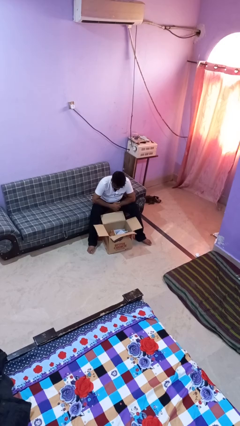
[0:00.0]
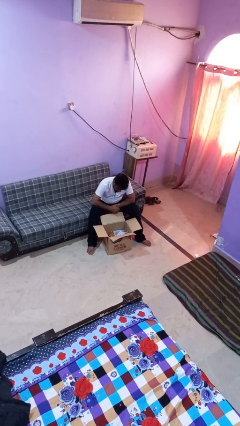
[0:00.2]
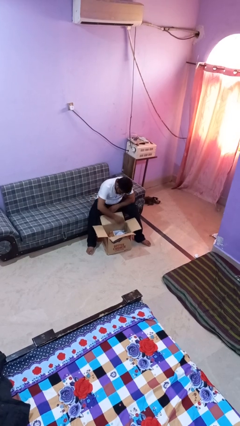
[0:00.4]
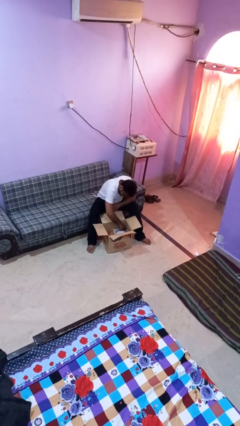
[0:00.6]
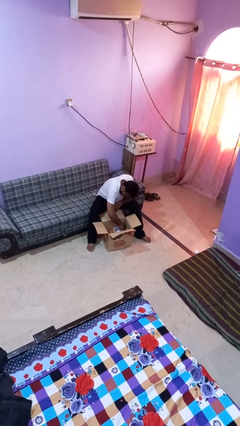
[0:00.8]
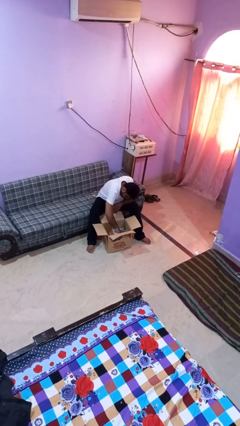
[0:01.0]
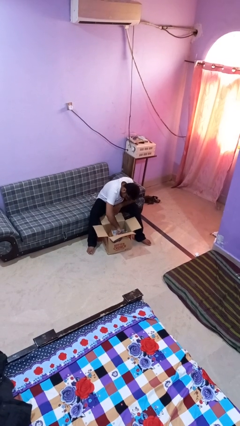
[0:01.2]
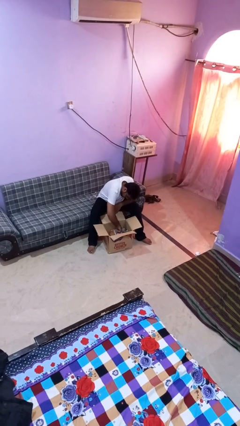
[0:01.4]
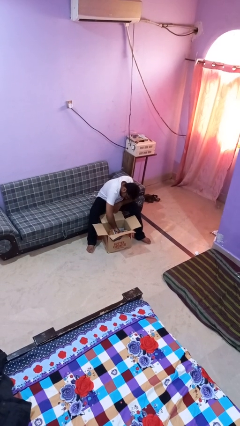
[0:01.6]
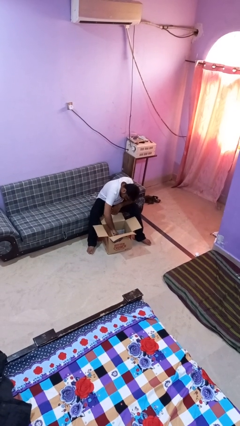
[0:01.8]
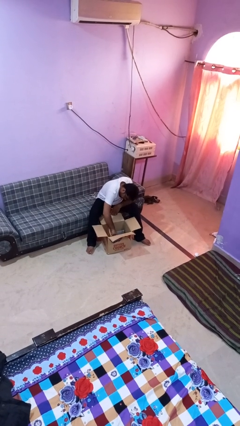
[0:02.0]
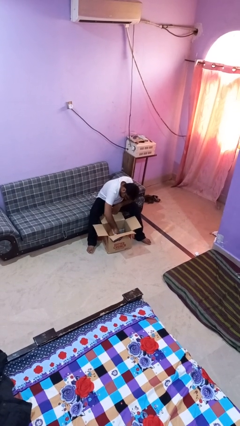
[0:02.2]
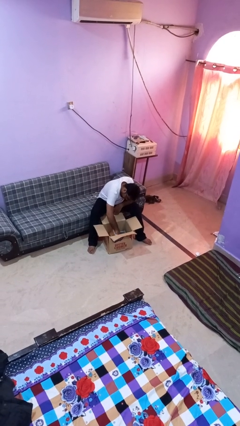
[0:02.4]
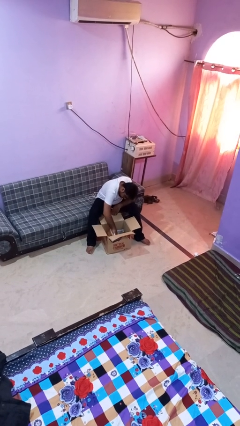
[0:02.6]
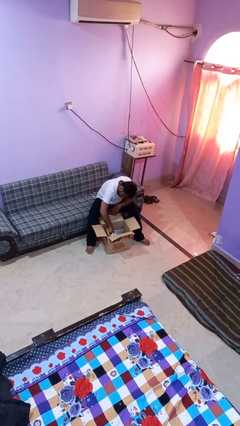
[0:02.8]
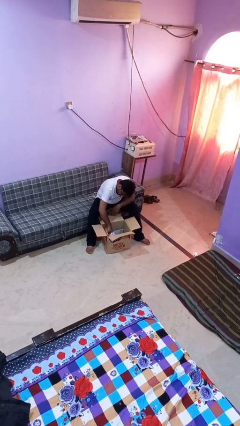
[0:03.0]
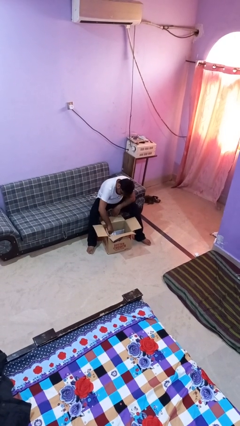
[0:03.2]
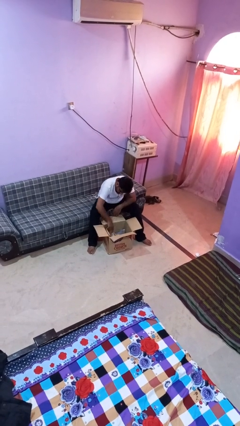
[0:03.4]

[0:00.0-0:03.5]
person searches in box

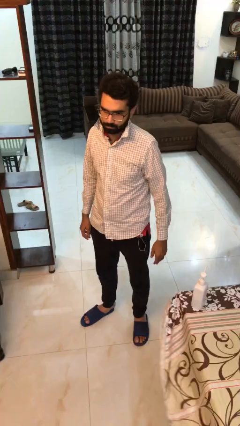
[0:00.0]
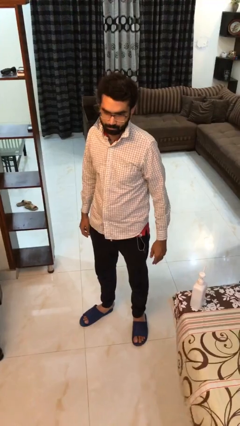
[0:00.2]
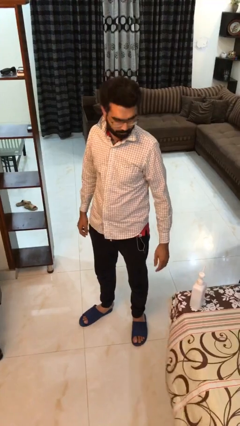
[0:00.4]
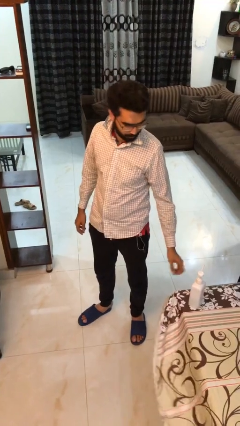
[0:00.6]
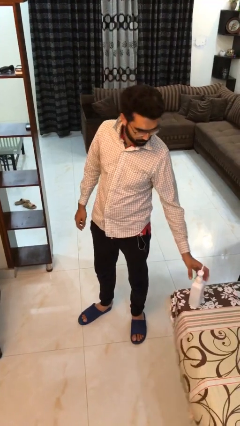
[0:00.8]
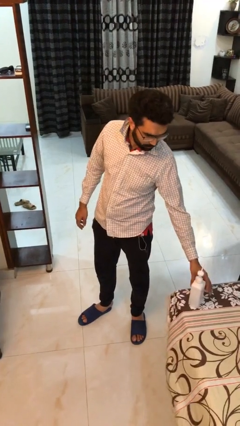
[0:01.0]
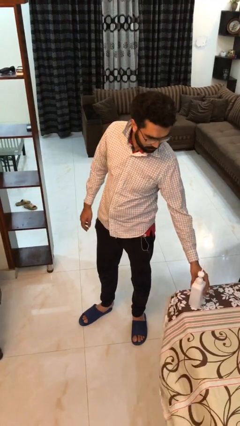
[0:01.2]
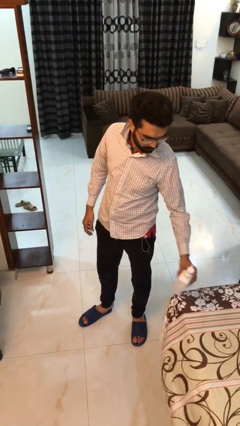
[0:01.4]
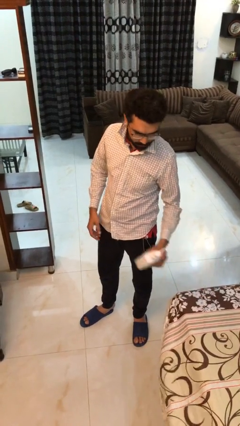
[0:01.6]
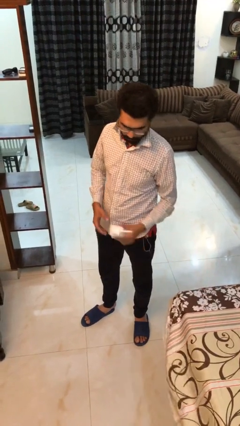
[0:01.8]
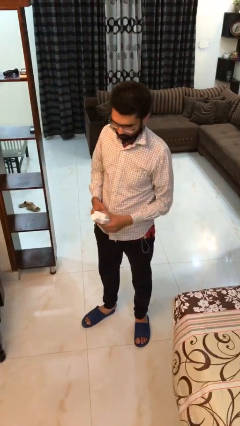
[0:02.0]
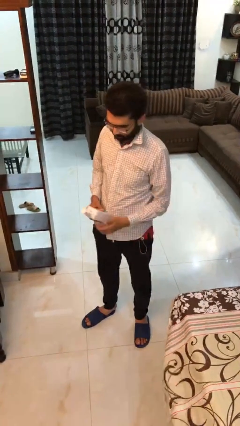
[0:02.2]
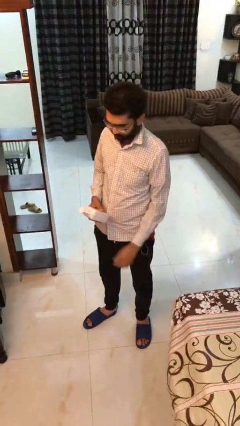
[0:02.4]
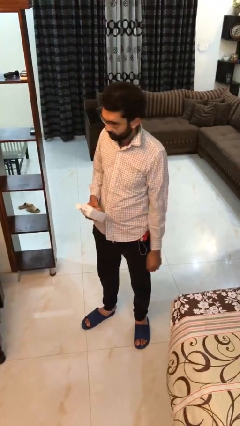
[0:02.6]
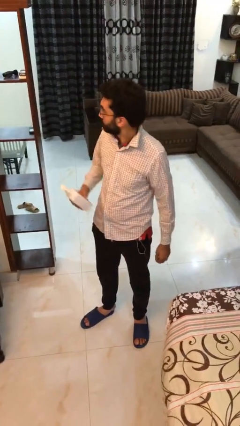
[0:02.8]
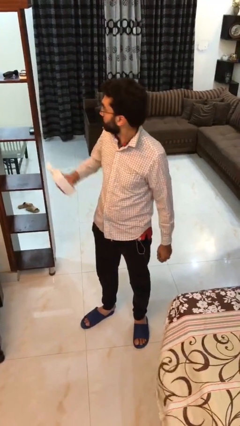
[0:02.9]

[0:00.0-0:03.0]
person picks up object from table

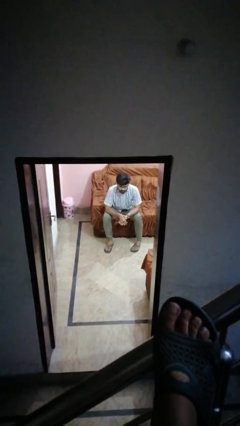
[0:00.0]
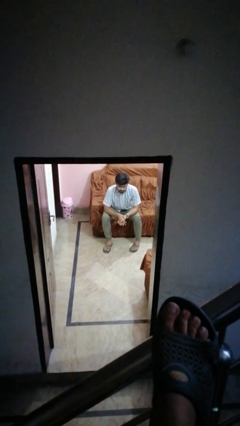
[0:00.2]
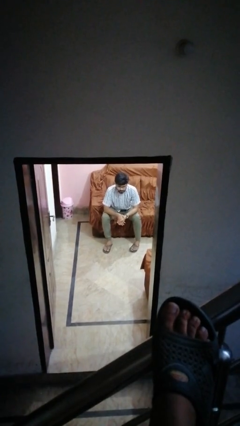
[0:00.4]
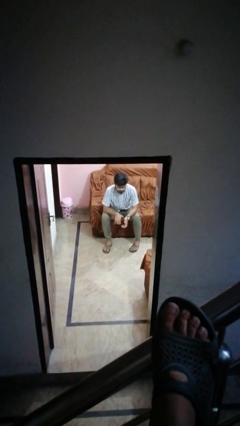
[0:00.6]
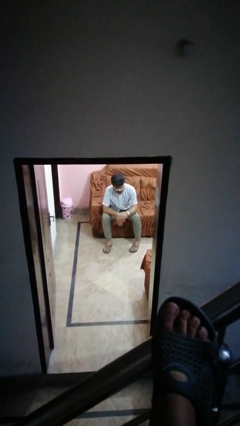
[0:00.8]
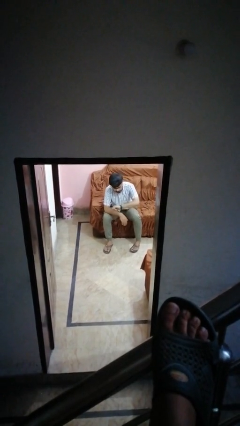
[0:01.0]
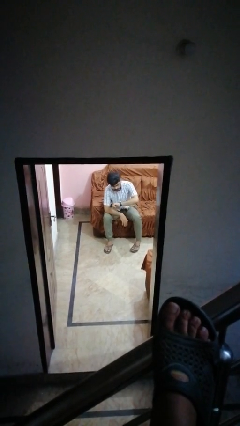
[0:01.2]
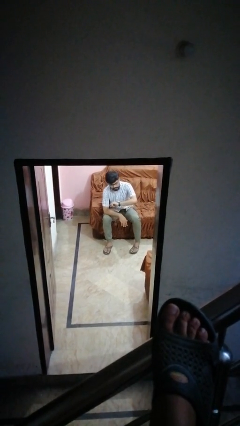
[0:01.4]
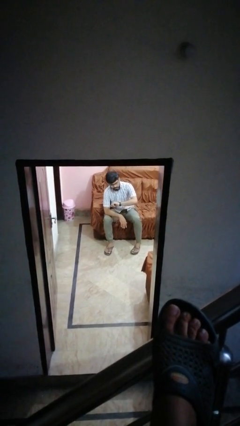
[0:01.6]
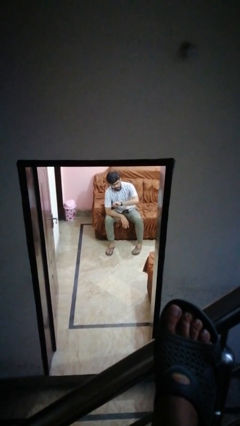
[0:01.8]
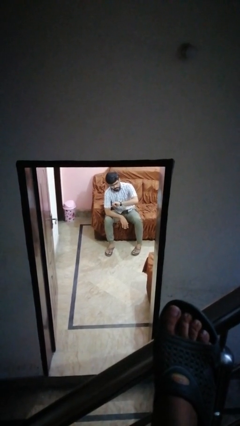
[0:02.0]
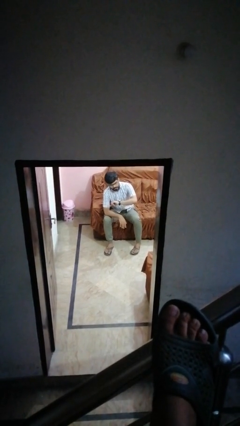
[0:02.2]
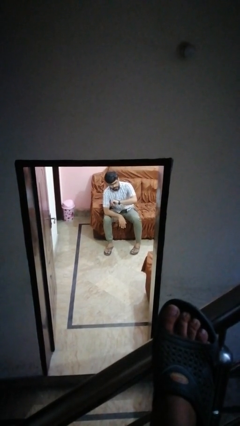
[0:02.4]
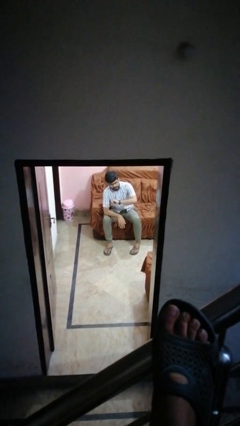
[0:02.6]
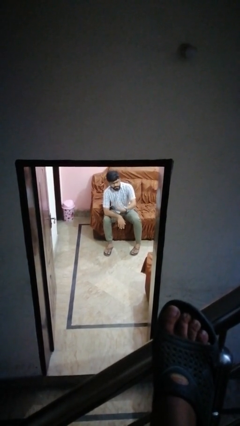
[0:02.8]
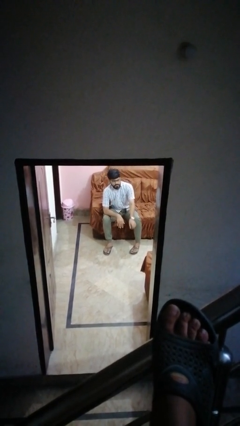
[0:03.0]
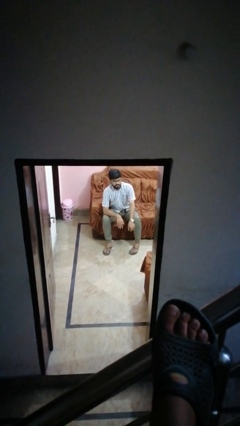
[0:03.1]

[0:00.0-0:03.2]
person looks at wristwatch

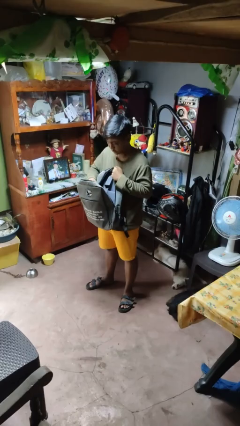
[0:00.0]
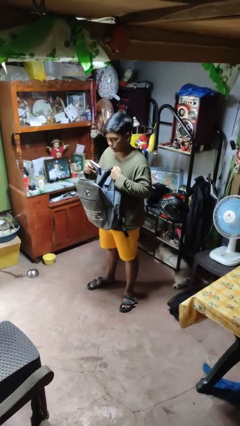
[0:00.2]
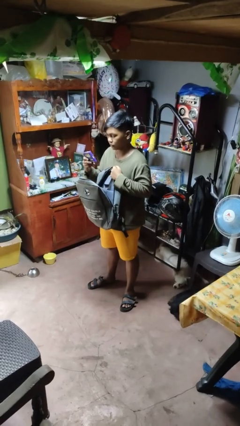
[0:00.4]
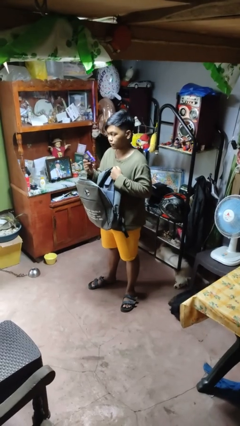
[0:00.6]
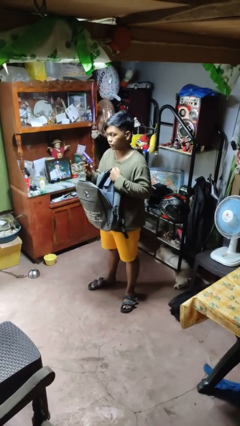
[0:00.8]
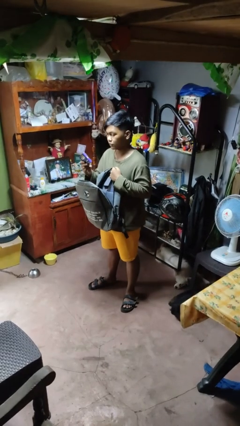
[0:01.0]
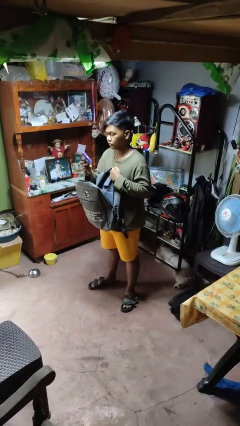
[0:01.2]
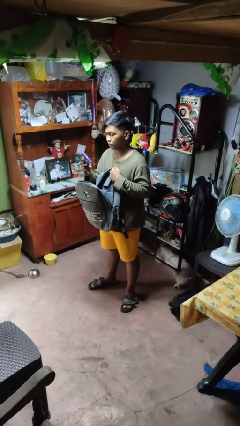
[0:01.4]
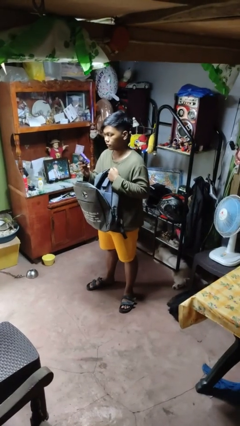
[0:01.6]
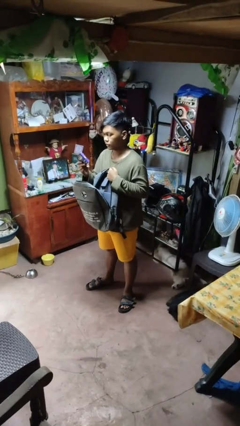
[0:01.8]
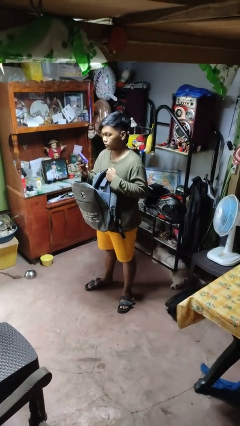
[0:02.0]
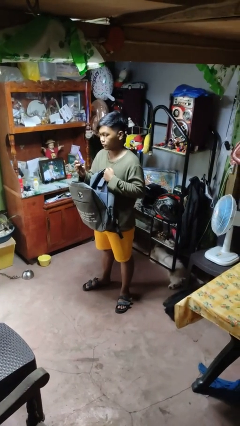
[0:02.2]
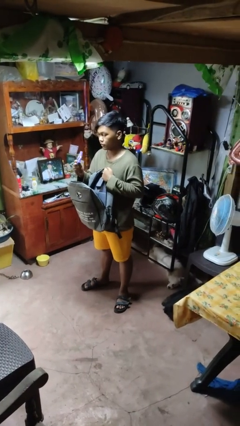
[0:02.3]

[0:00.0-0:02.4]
person takes object from backpack

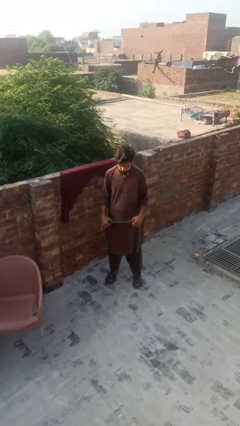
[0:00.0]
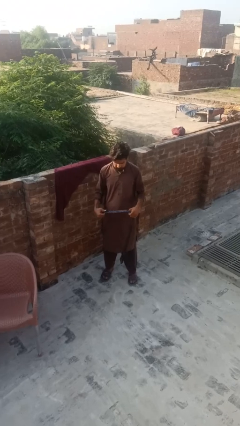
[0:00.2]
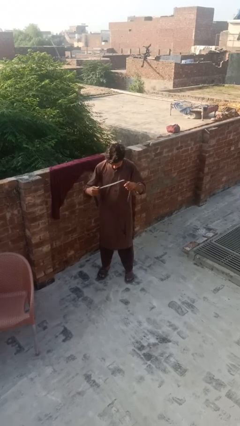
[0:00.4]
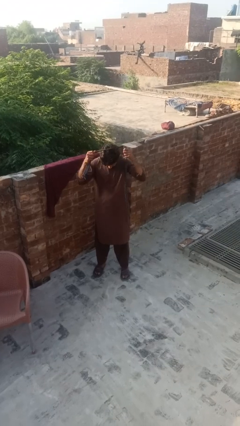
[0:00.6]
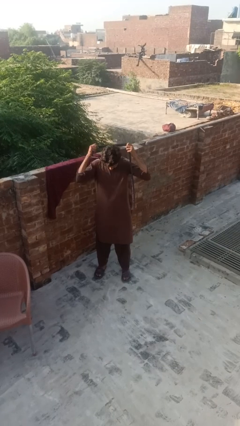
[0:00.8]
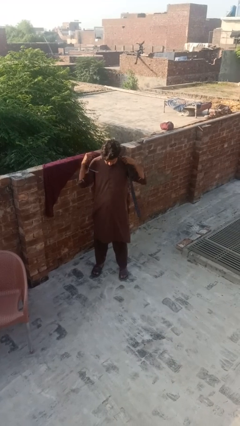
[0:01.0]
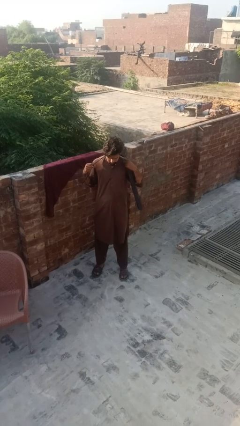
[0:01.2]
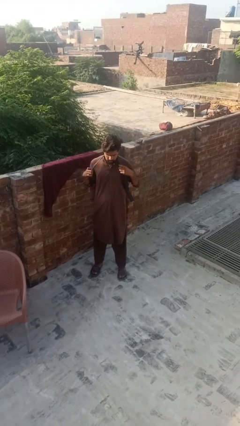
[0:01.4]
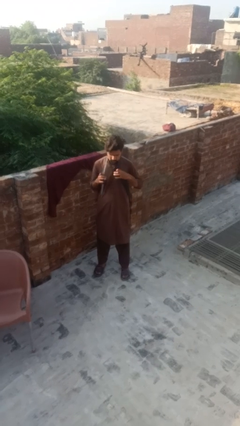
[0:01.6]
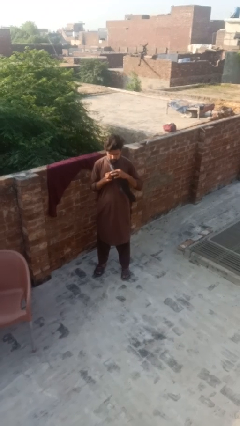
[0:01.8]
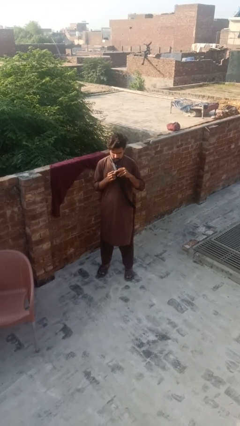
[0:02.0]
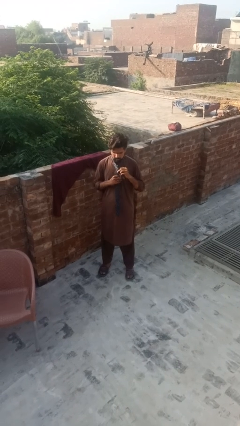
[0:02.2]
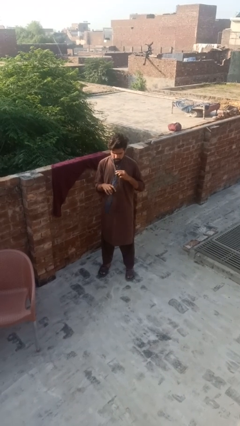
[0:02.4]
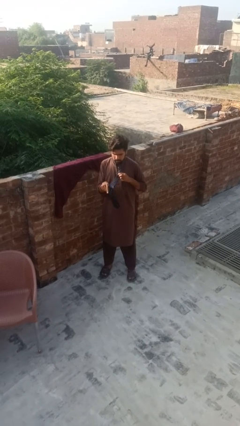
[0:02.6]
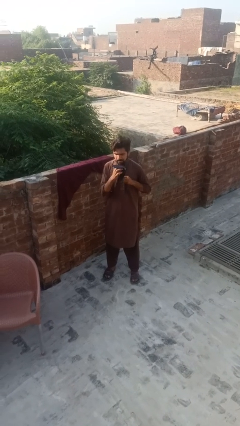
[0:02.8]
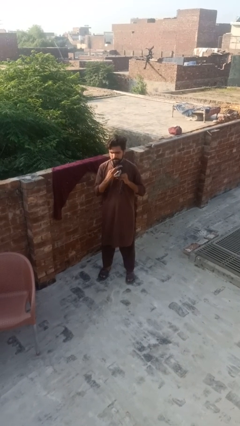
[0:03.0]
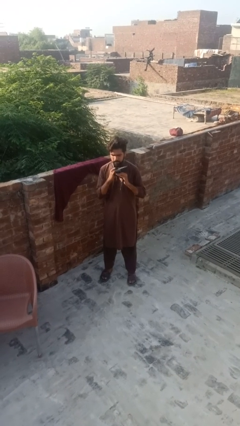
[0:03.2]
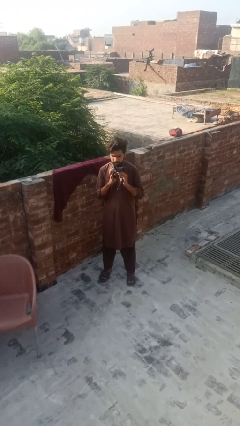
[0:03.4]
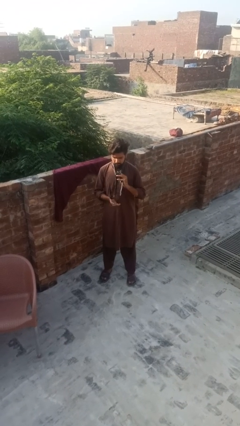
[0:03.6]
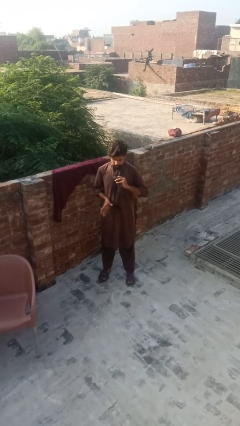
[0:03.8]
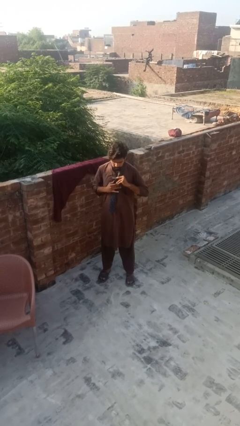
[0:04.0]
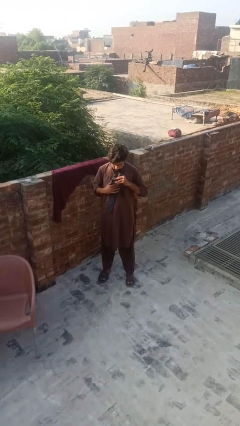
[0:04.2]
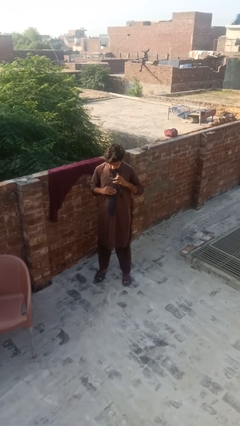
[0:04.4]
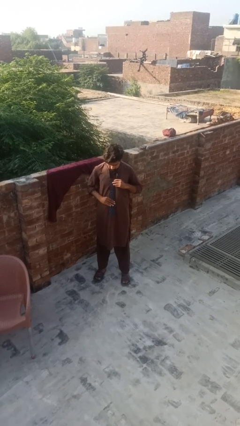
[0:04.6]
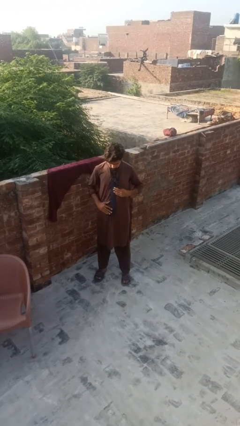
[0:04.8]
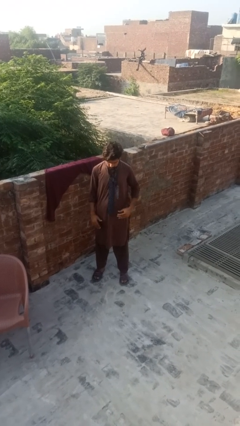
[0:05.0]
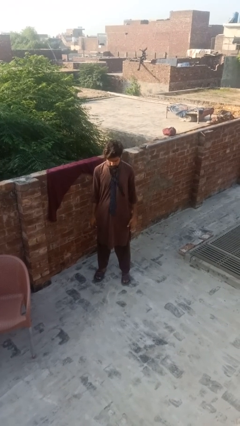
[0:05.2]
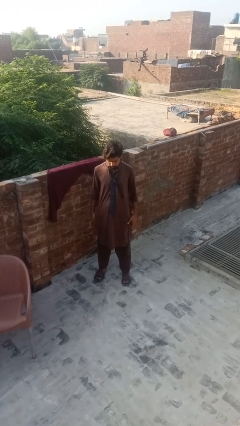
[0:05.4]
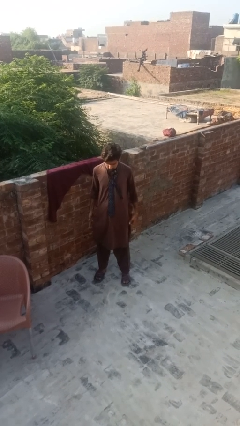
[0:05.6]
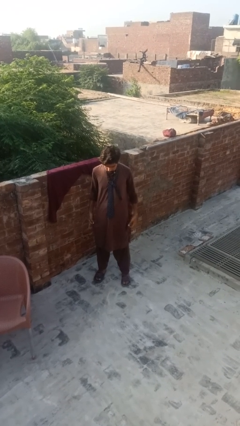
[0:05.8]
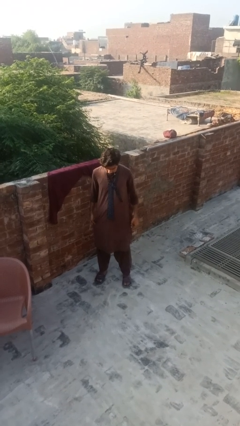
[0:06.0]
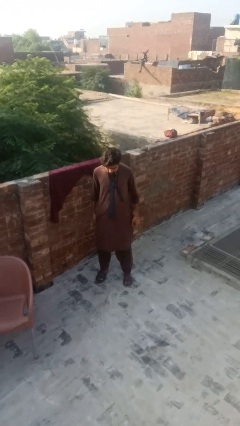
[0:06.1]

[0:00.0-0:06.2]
person puts on necktie
